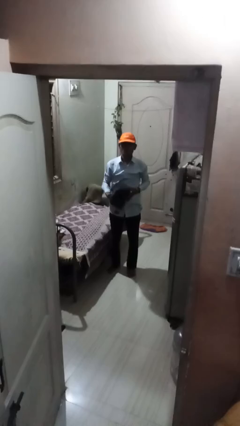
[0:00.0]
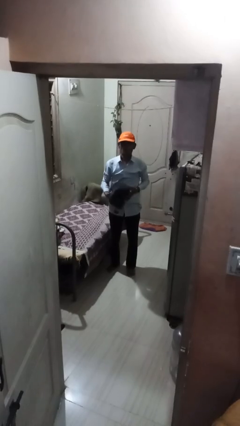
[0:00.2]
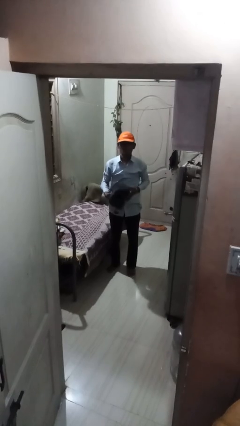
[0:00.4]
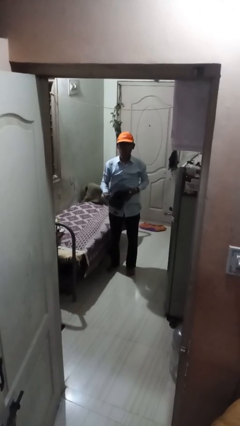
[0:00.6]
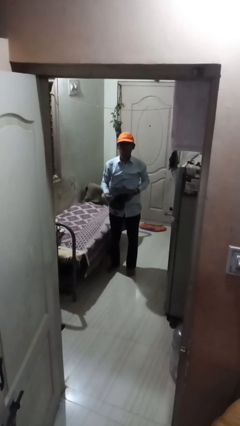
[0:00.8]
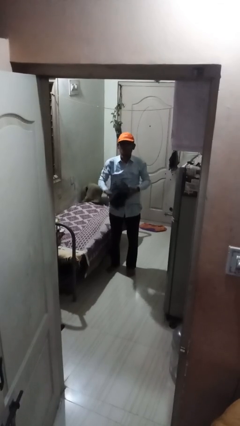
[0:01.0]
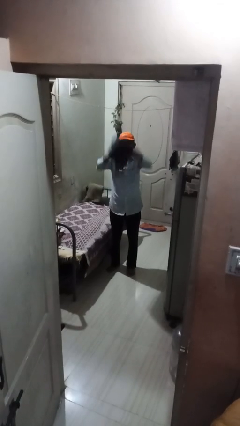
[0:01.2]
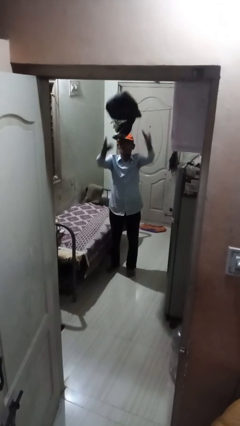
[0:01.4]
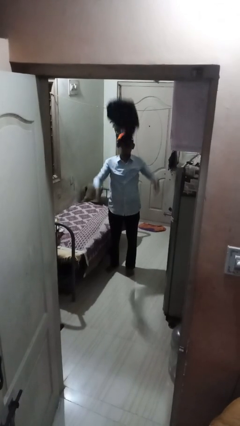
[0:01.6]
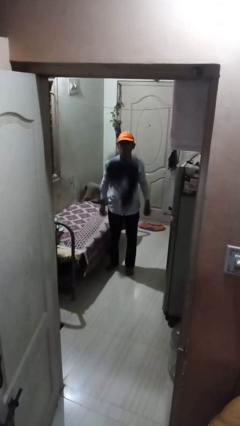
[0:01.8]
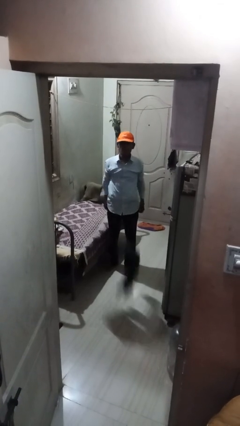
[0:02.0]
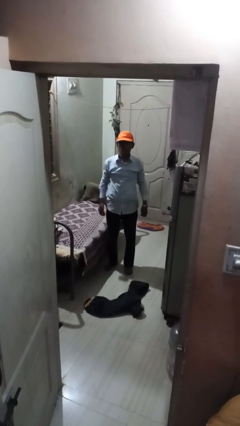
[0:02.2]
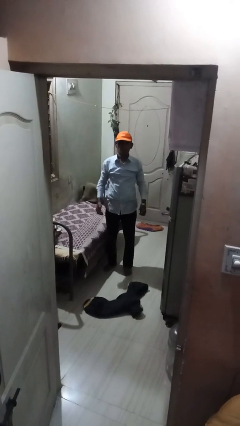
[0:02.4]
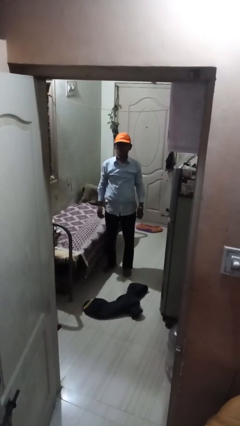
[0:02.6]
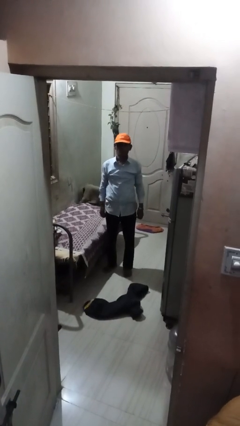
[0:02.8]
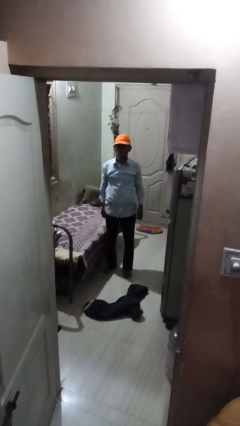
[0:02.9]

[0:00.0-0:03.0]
person throws object into air

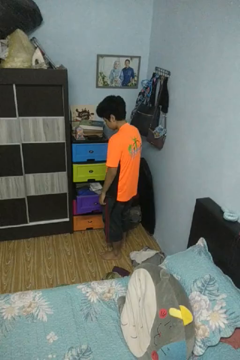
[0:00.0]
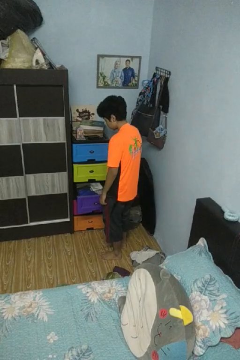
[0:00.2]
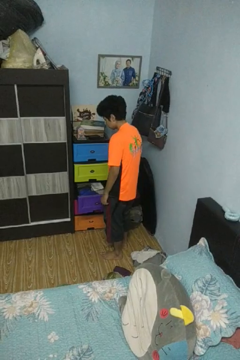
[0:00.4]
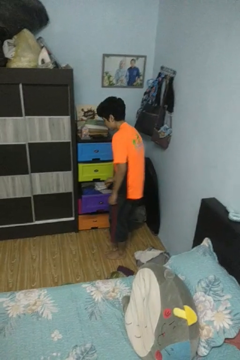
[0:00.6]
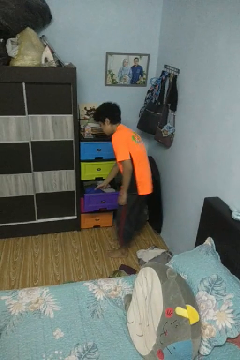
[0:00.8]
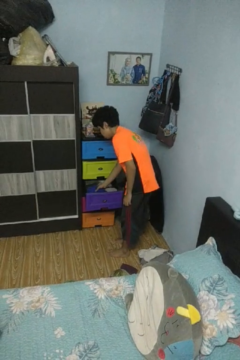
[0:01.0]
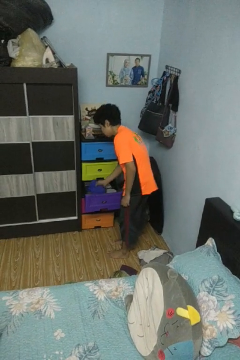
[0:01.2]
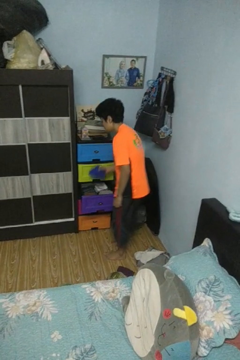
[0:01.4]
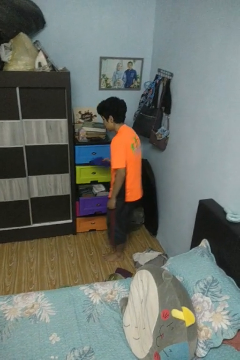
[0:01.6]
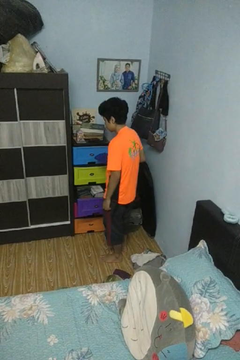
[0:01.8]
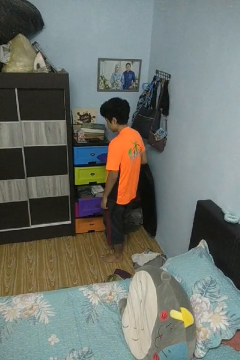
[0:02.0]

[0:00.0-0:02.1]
person takes clothes from dresser

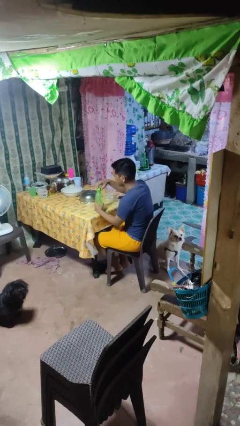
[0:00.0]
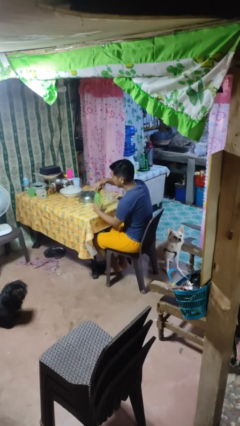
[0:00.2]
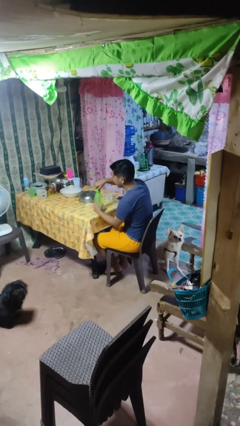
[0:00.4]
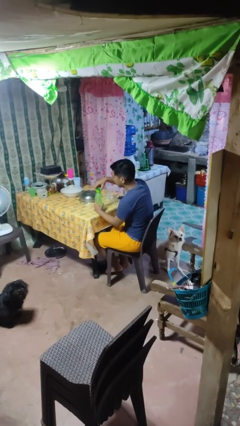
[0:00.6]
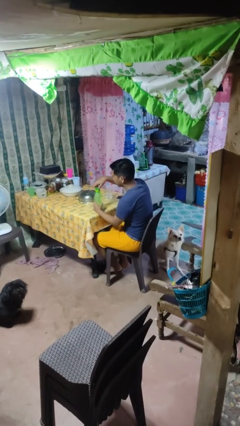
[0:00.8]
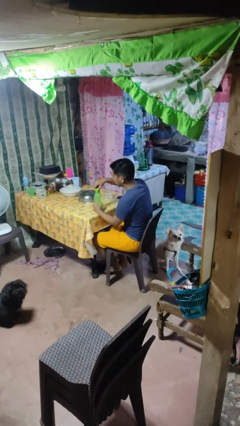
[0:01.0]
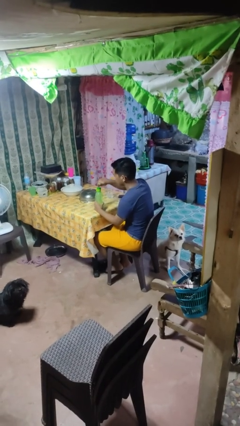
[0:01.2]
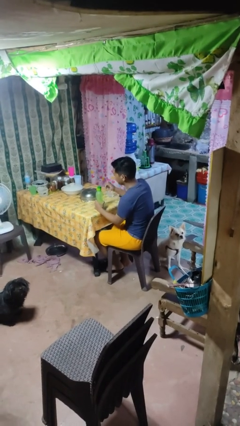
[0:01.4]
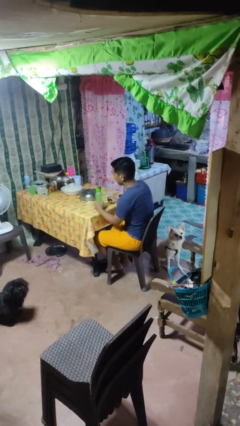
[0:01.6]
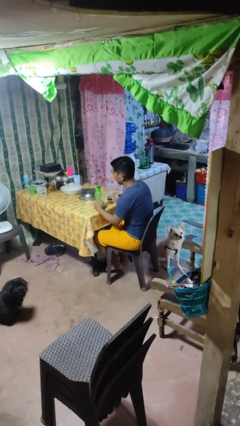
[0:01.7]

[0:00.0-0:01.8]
person screws lid to bottle

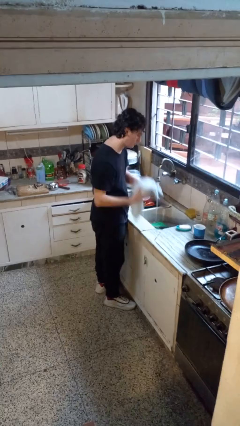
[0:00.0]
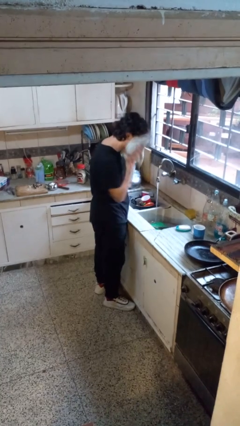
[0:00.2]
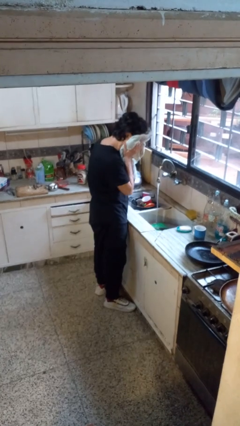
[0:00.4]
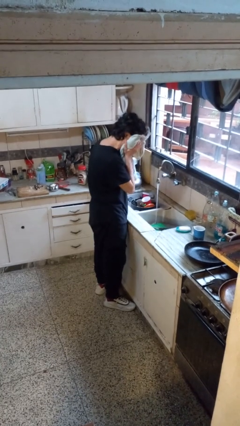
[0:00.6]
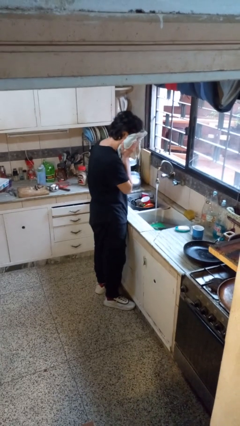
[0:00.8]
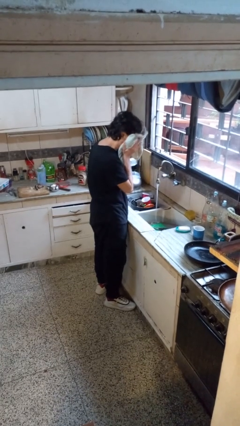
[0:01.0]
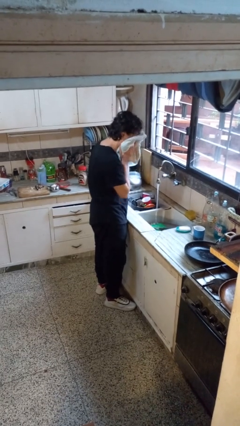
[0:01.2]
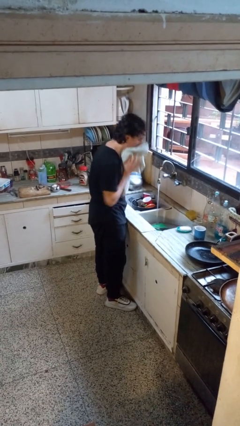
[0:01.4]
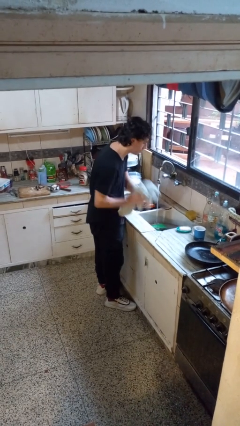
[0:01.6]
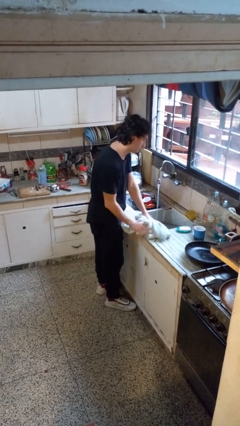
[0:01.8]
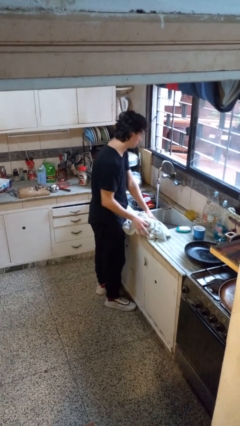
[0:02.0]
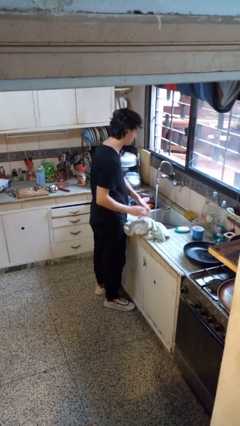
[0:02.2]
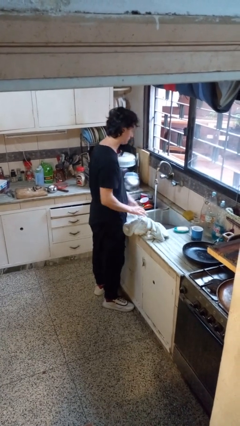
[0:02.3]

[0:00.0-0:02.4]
person dries face with towel

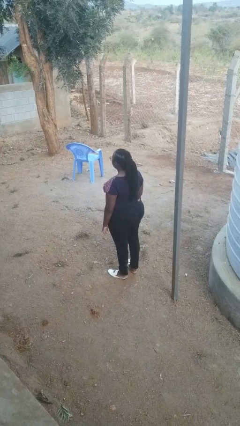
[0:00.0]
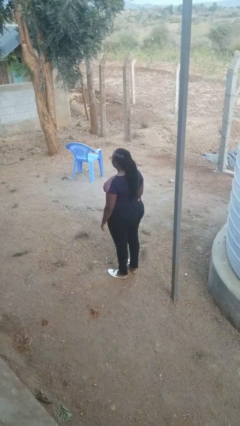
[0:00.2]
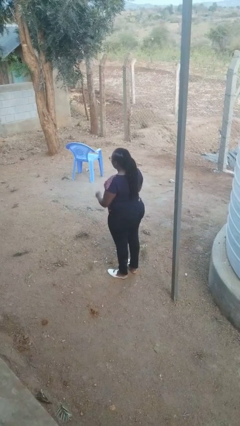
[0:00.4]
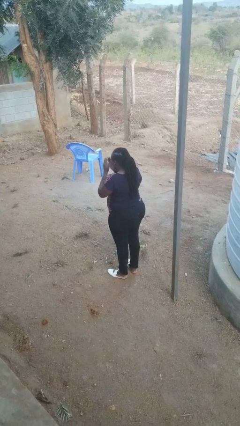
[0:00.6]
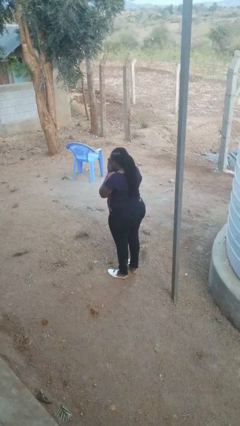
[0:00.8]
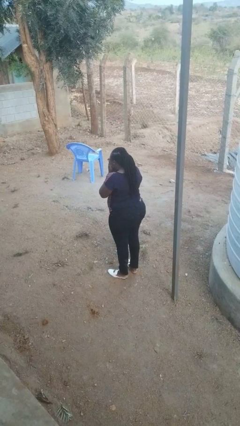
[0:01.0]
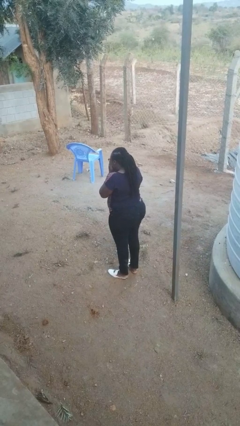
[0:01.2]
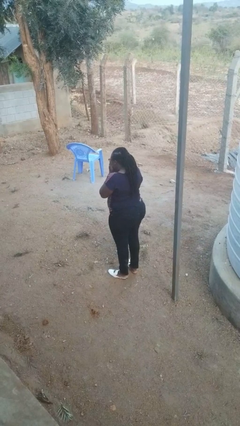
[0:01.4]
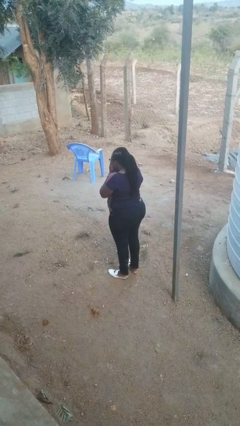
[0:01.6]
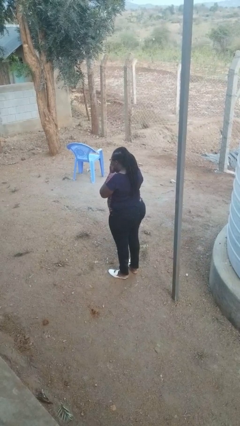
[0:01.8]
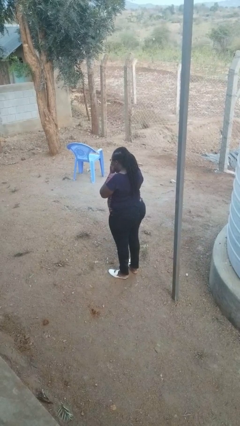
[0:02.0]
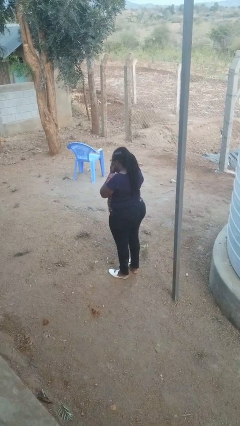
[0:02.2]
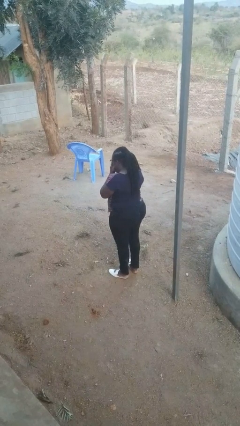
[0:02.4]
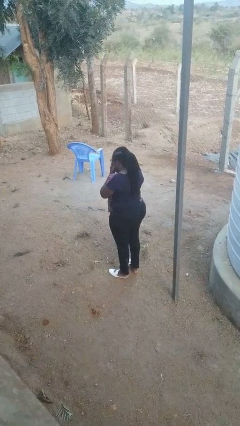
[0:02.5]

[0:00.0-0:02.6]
person sneezes into hand

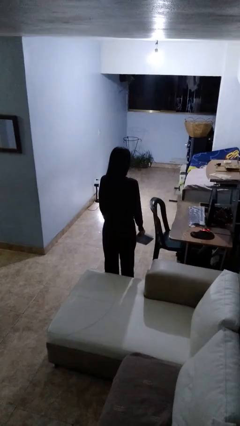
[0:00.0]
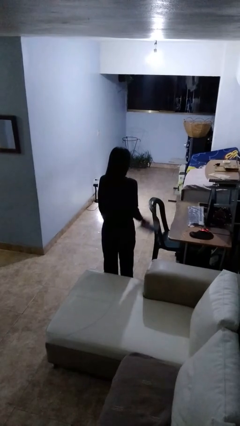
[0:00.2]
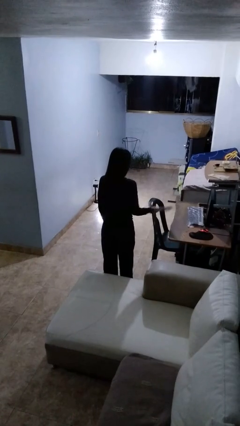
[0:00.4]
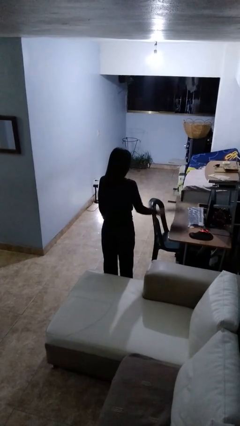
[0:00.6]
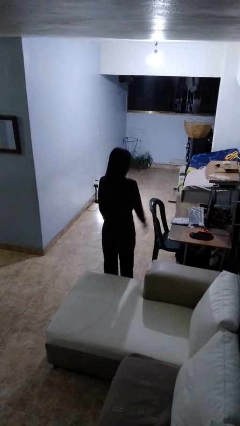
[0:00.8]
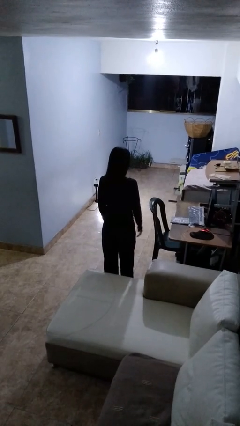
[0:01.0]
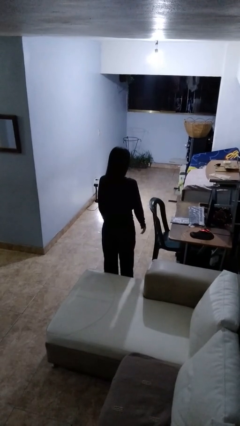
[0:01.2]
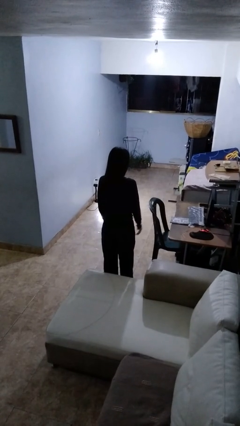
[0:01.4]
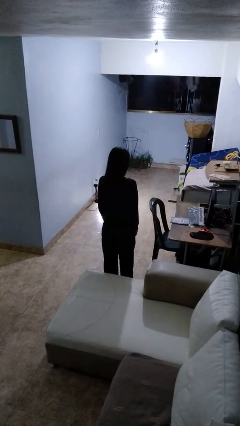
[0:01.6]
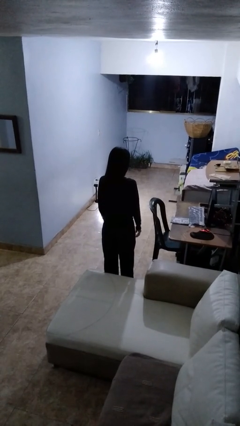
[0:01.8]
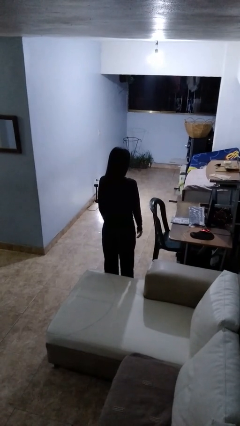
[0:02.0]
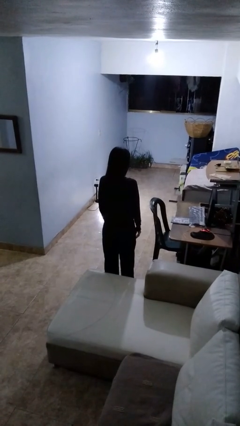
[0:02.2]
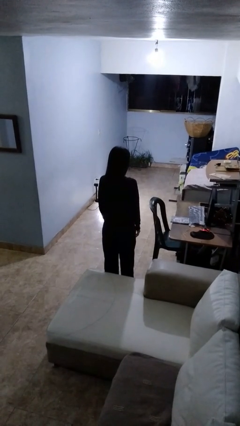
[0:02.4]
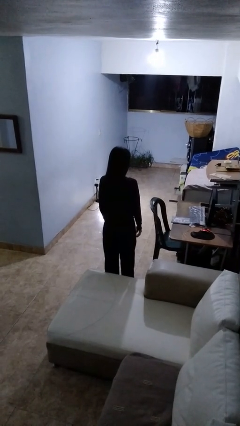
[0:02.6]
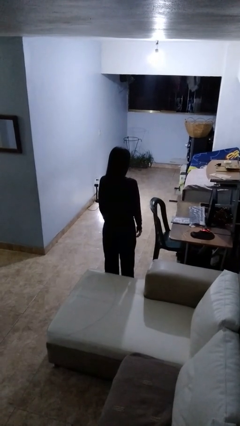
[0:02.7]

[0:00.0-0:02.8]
person throws object on table

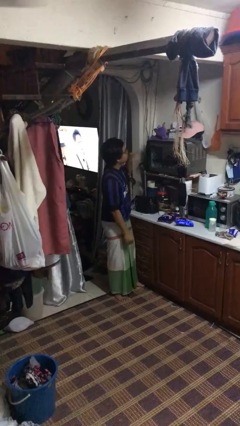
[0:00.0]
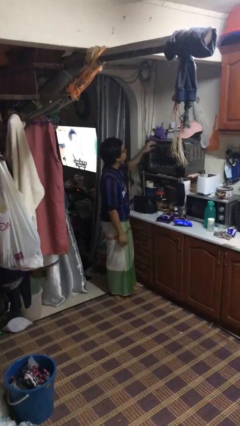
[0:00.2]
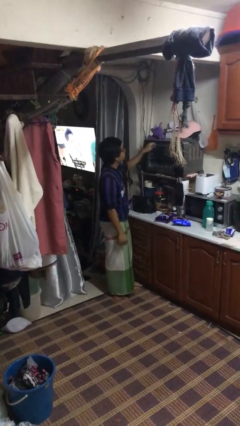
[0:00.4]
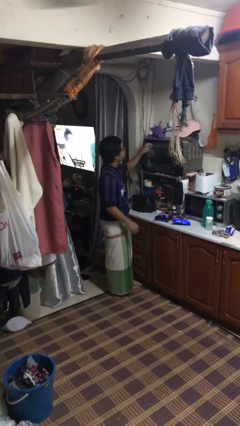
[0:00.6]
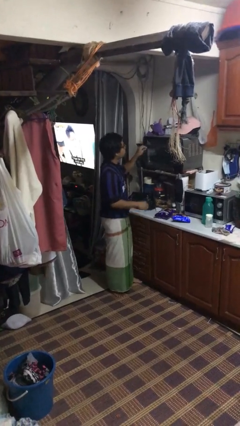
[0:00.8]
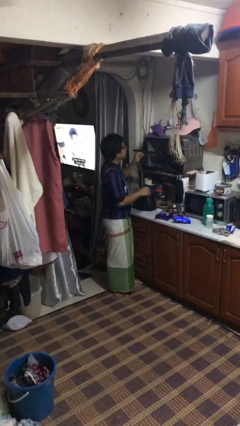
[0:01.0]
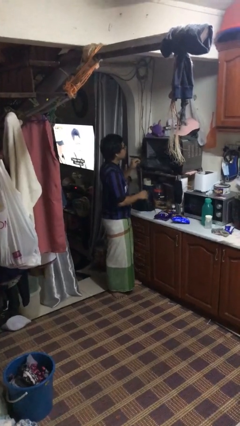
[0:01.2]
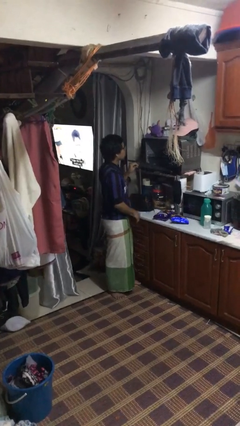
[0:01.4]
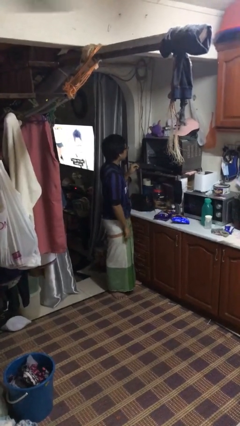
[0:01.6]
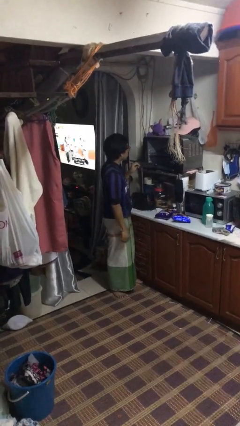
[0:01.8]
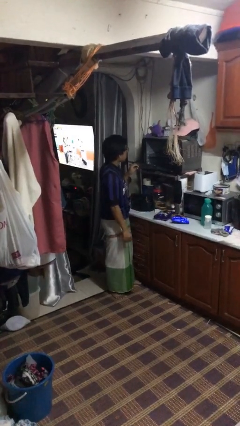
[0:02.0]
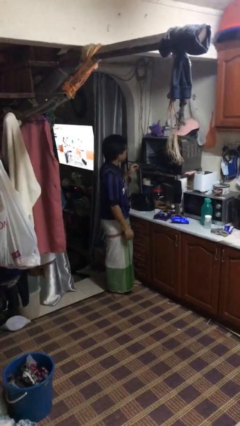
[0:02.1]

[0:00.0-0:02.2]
person opens oven door

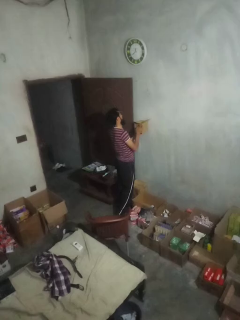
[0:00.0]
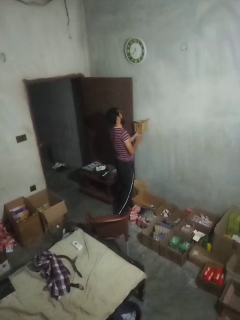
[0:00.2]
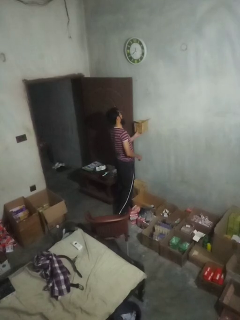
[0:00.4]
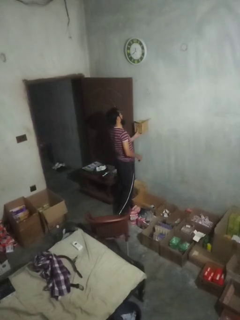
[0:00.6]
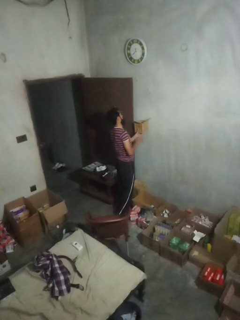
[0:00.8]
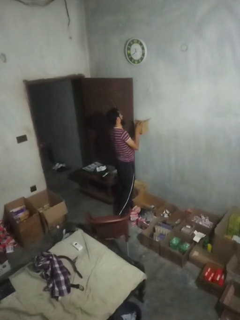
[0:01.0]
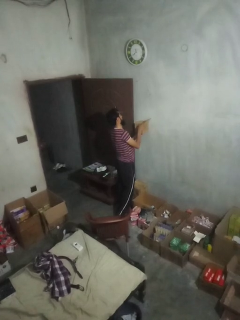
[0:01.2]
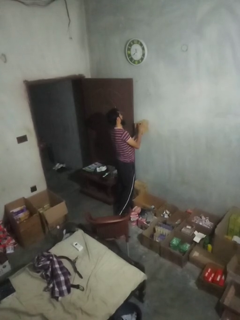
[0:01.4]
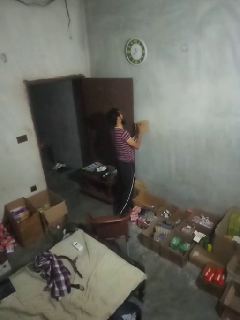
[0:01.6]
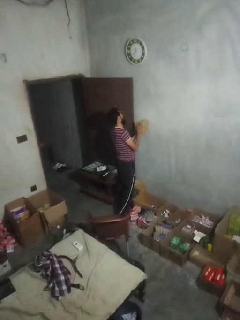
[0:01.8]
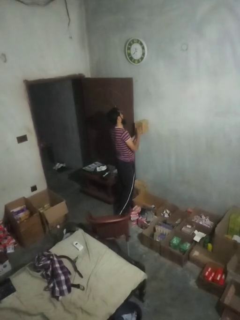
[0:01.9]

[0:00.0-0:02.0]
person closes mailbox
